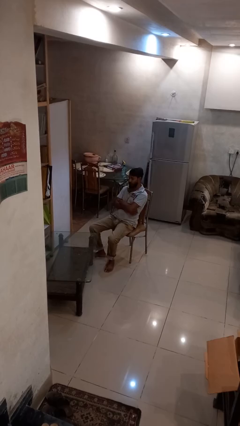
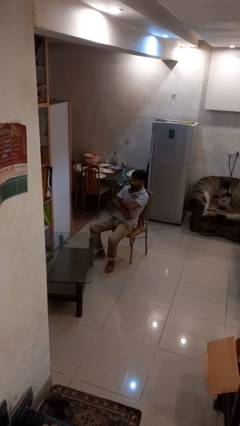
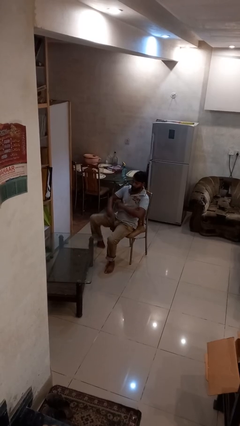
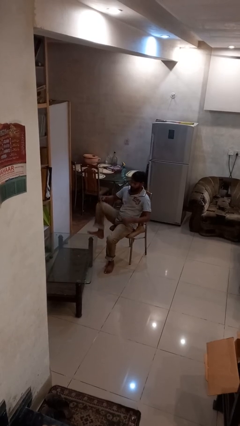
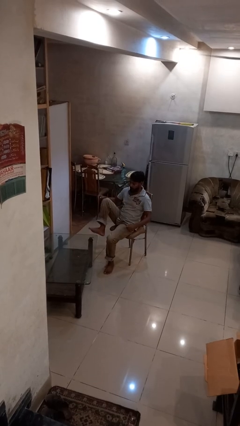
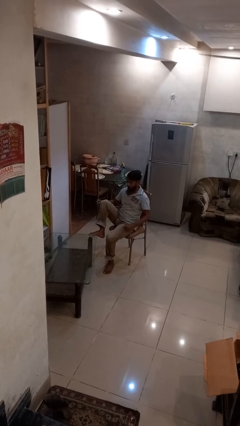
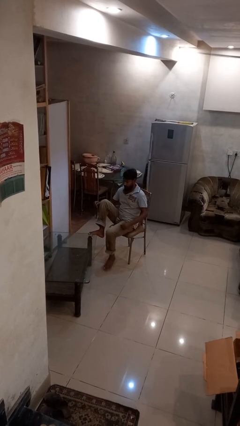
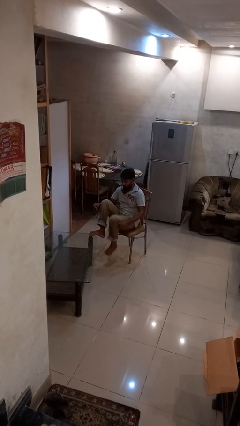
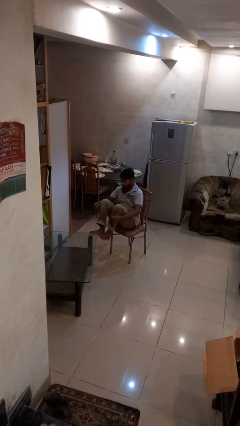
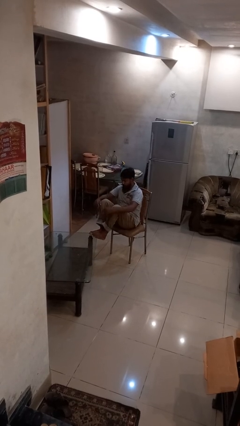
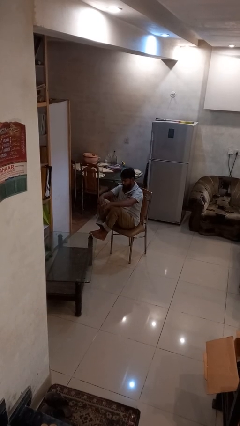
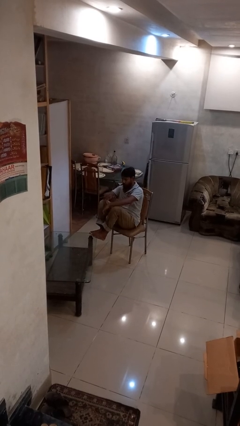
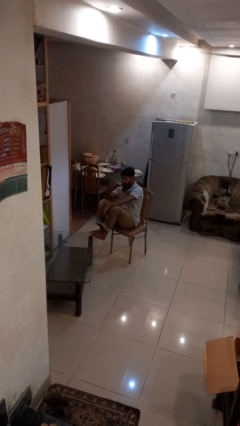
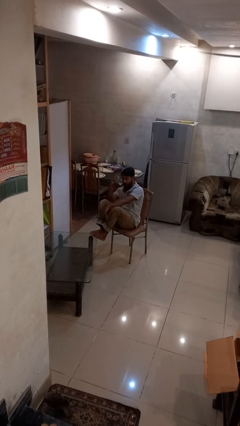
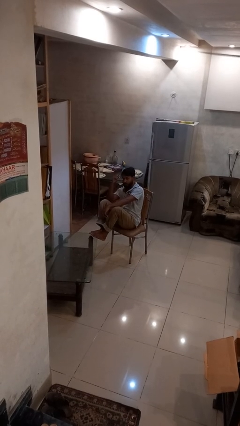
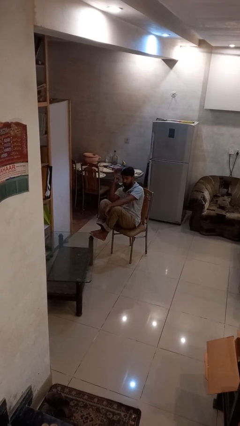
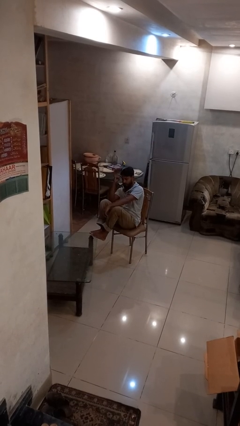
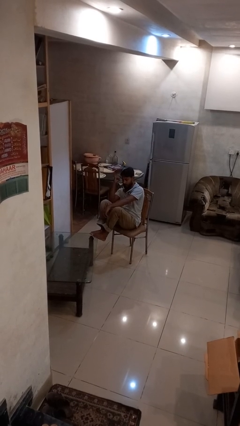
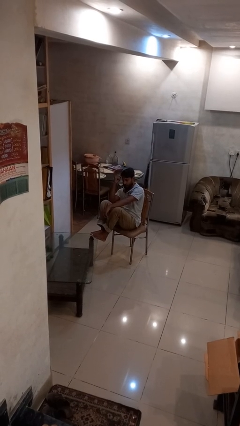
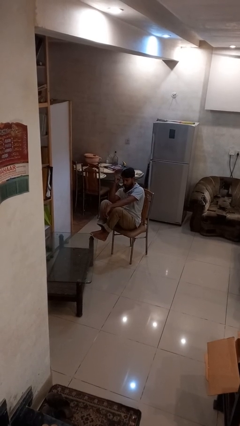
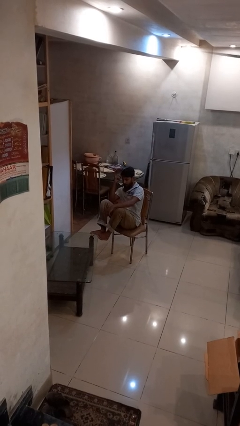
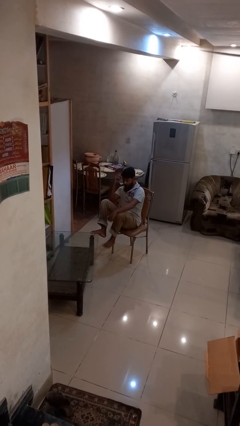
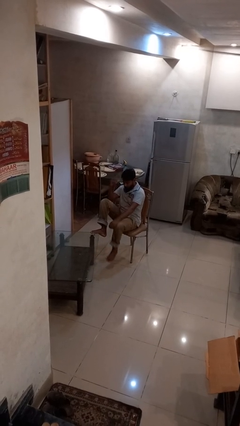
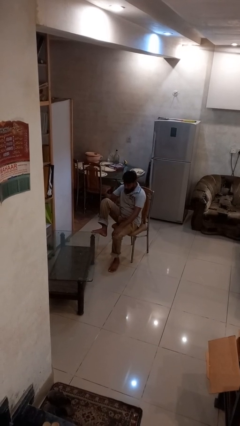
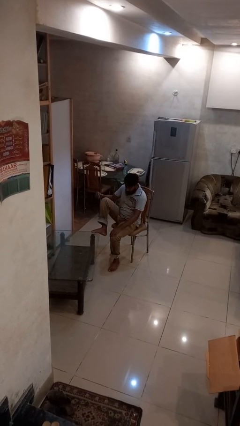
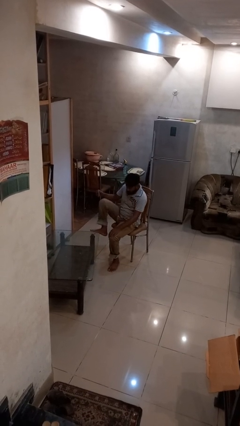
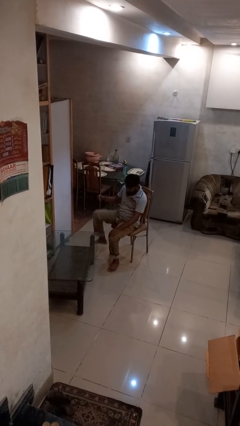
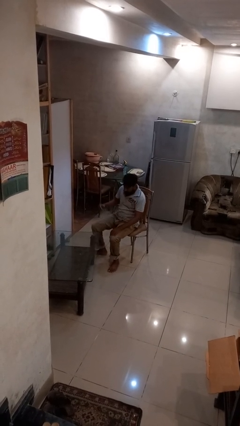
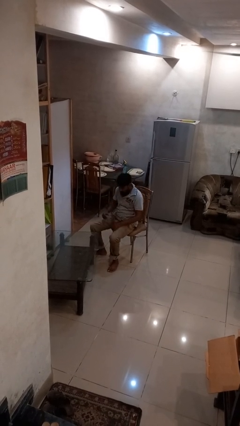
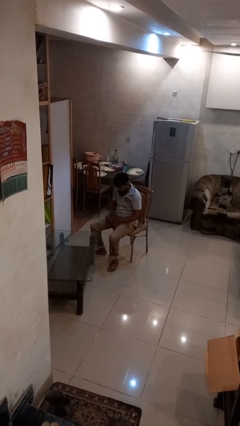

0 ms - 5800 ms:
person puts feet up

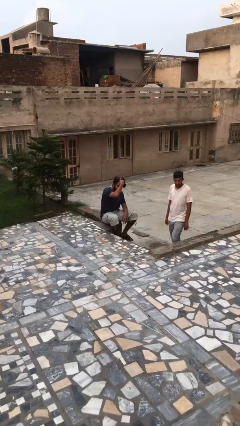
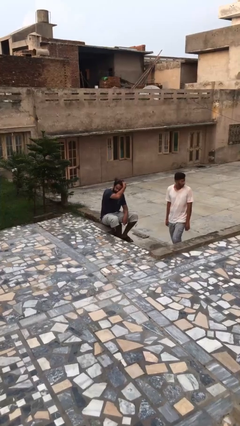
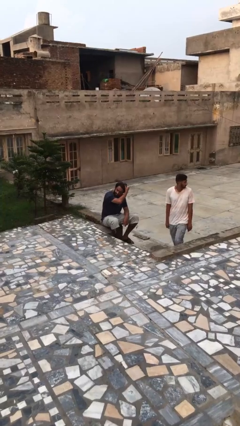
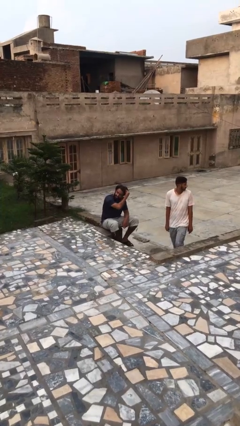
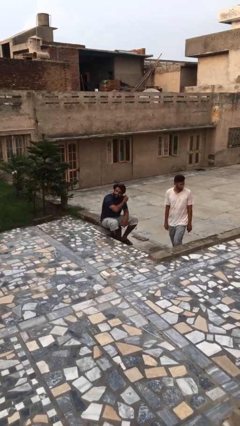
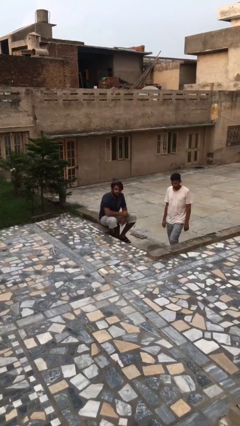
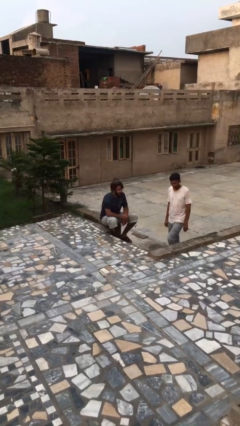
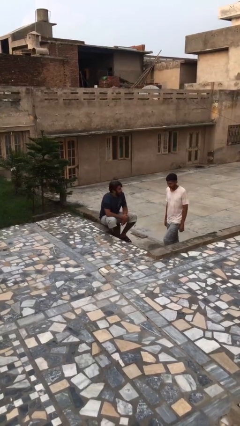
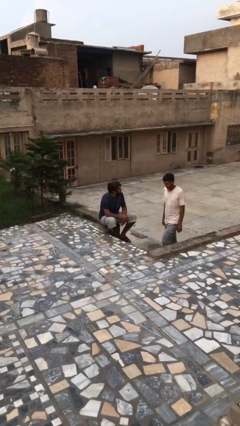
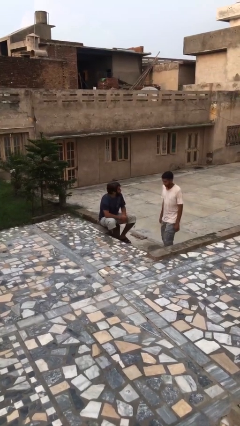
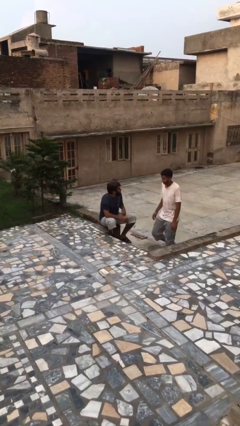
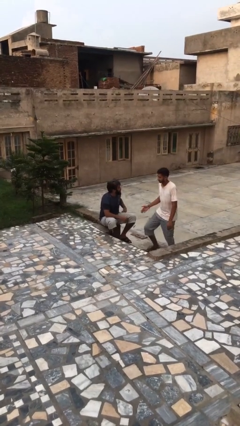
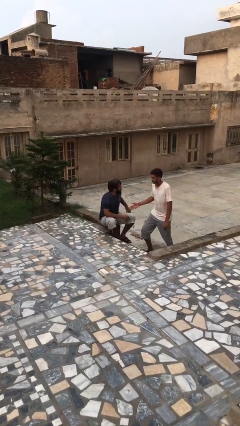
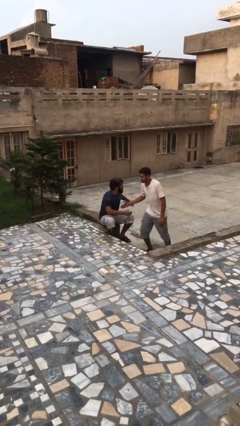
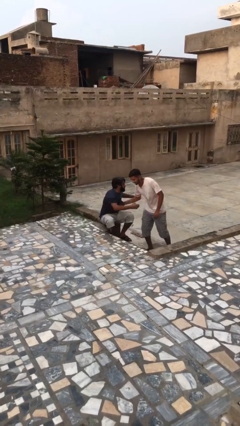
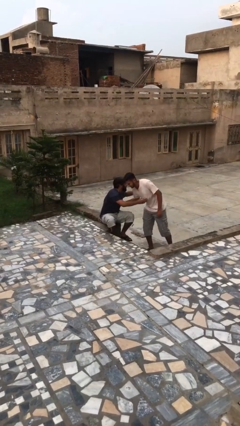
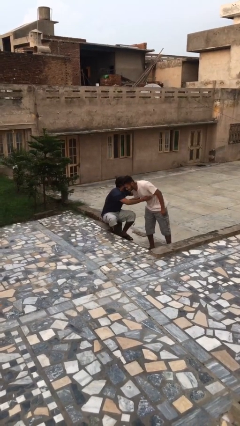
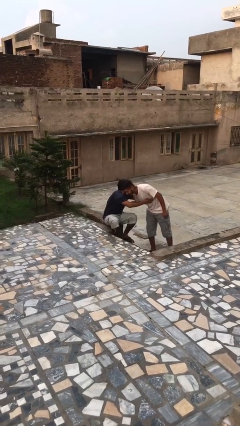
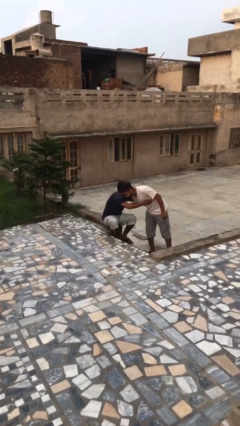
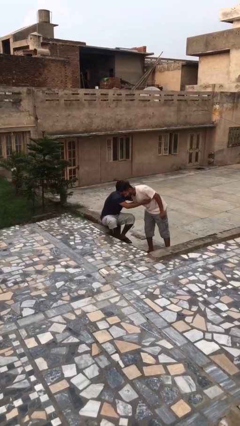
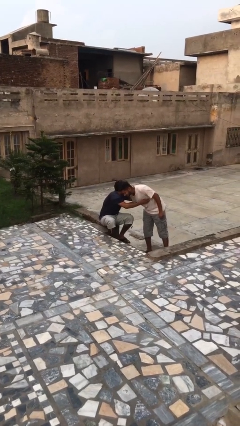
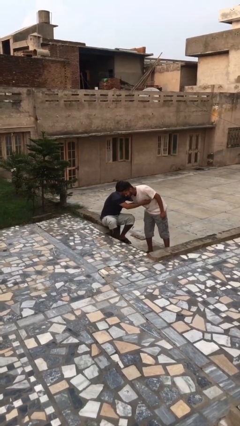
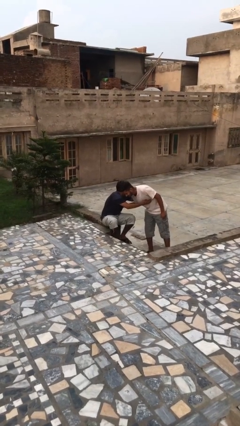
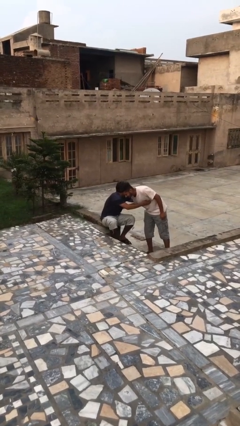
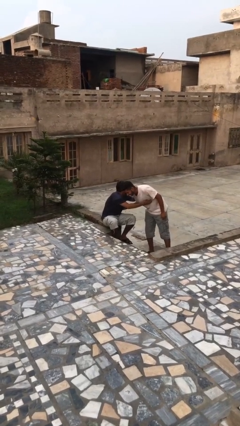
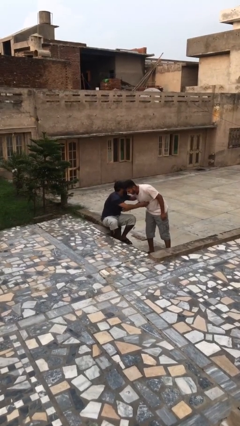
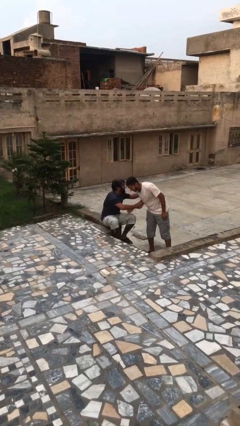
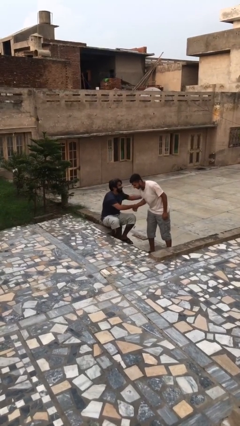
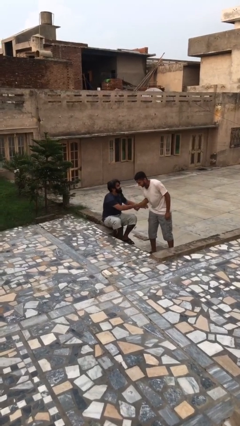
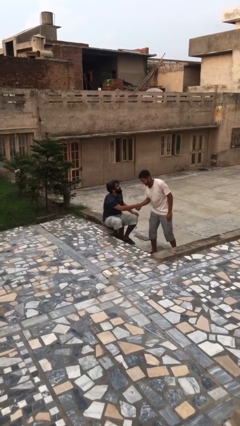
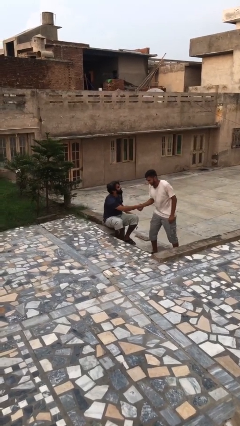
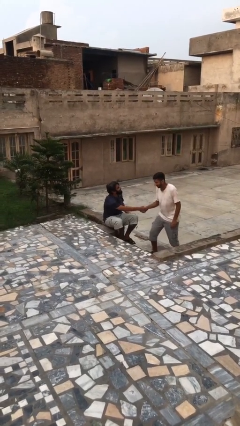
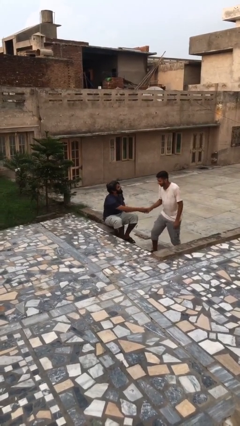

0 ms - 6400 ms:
person embraces person

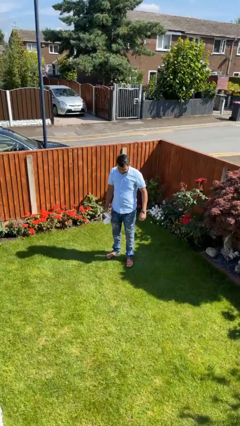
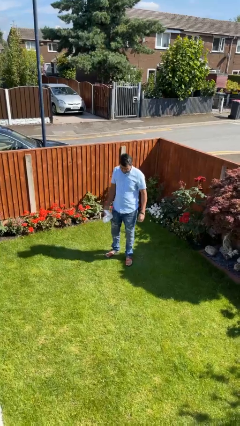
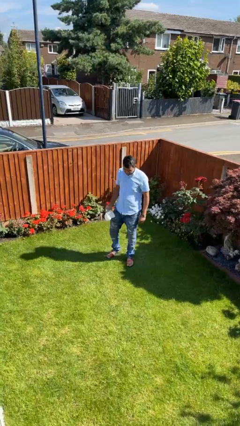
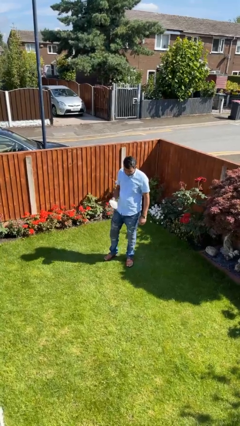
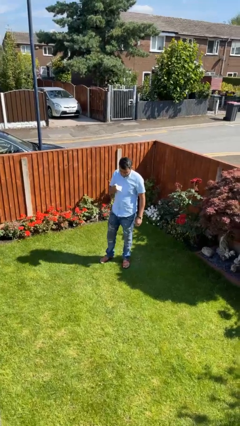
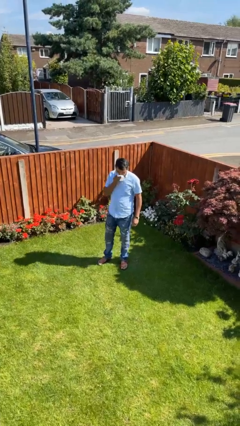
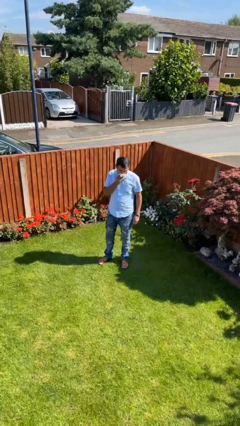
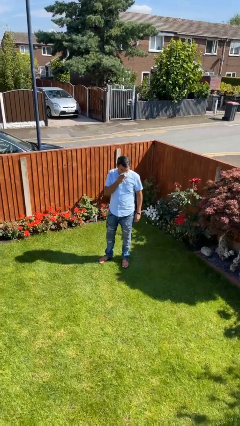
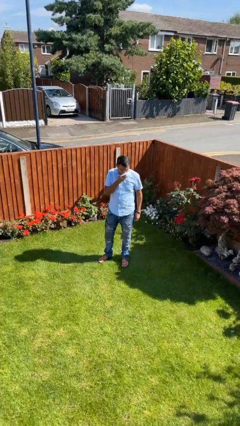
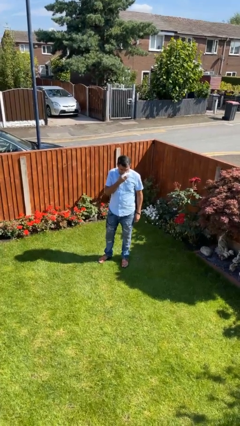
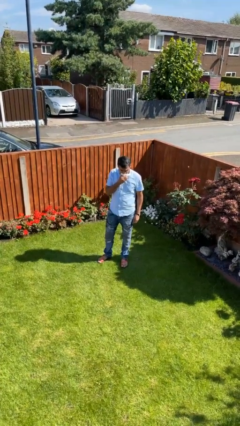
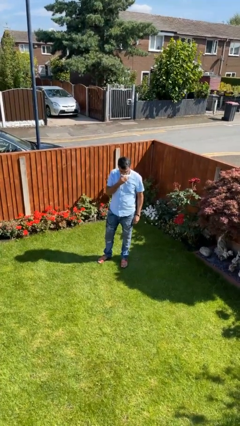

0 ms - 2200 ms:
person wipes mouth with napkin

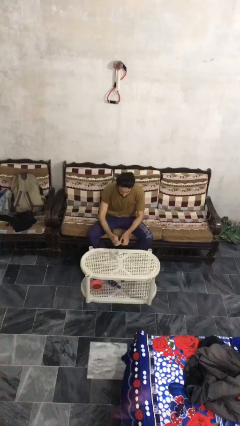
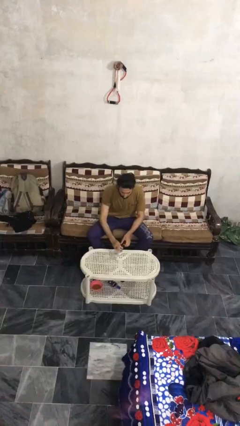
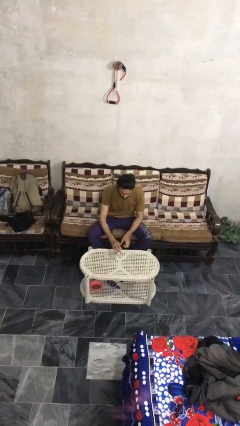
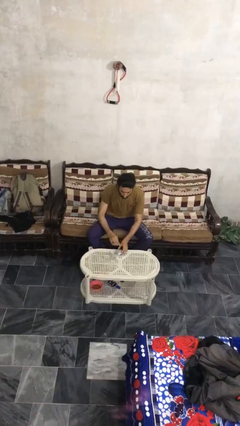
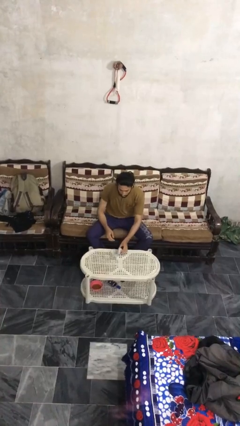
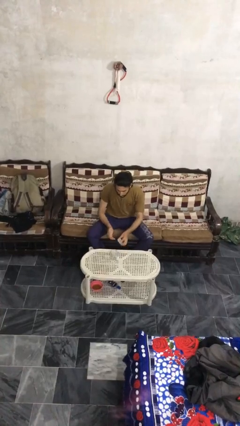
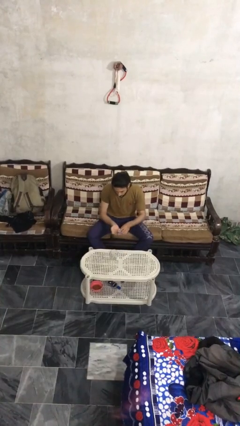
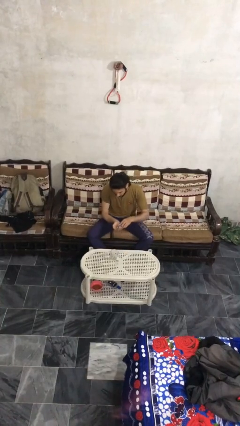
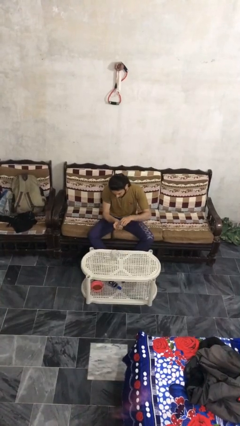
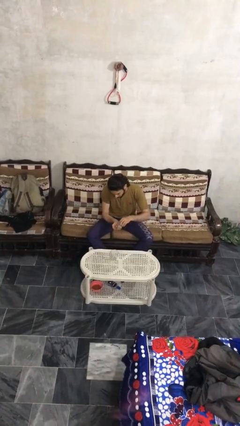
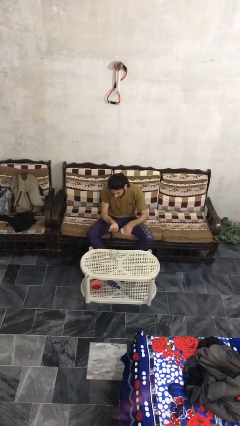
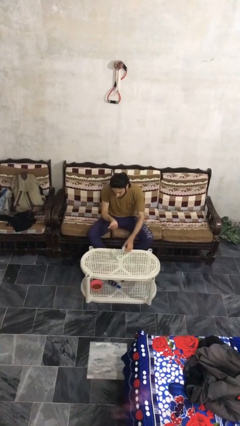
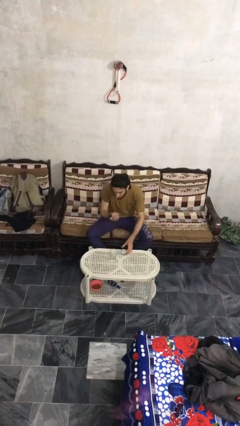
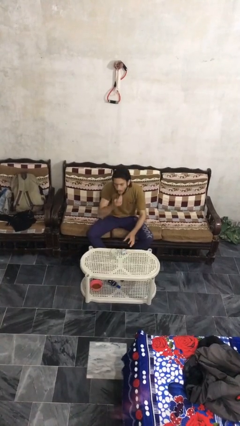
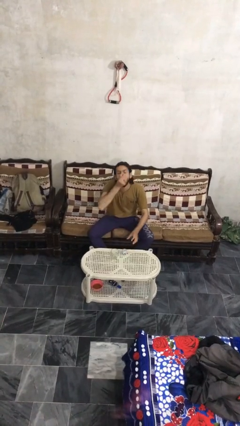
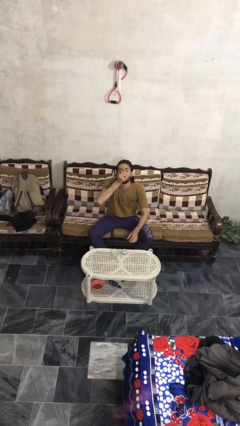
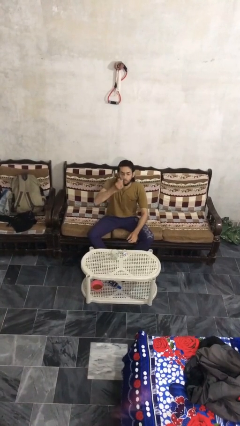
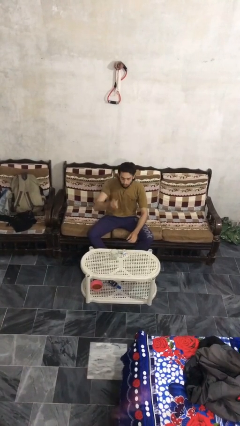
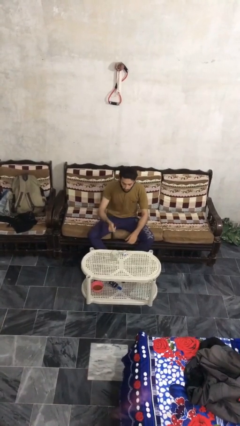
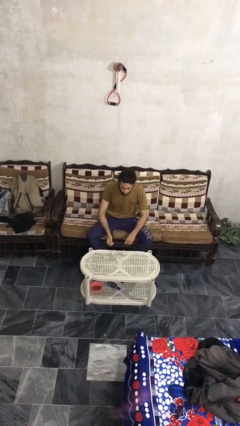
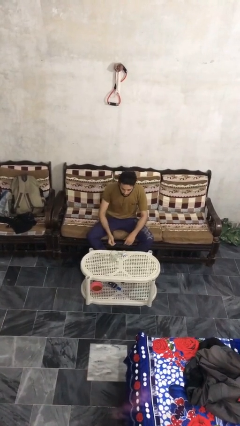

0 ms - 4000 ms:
person takes medicine pills
